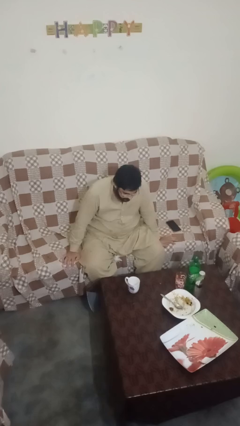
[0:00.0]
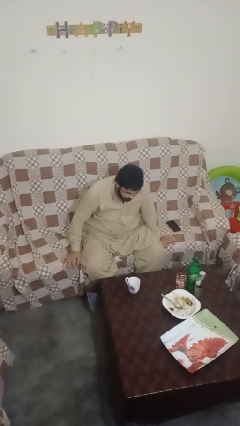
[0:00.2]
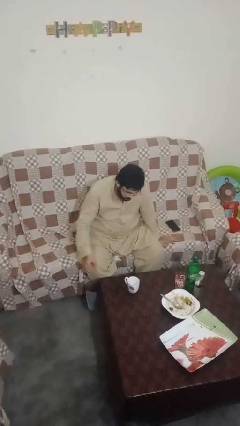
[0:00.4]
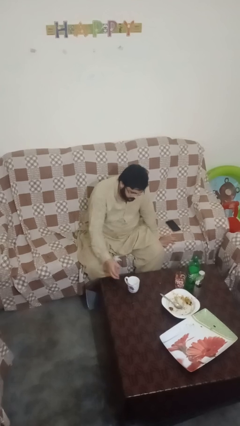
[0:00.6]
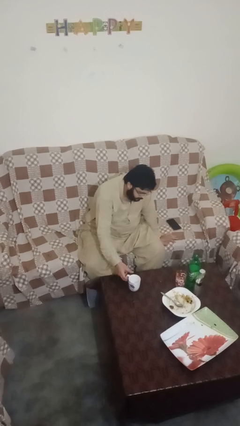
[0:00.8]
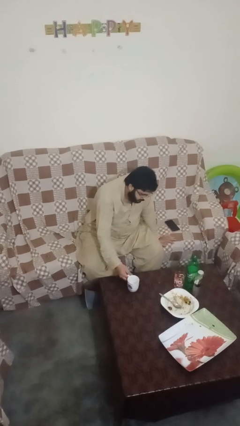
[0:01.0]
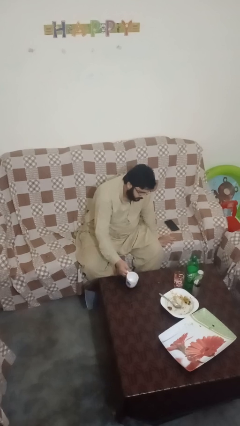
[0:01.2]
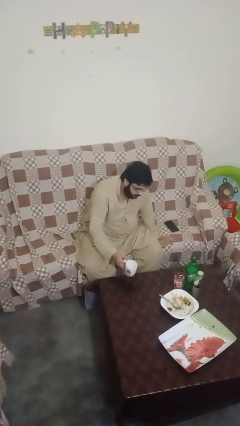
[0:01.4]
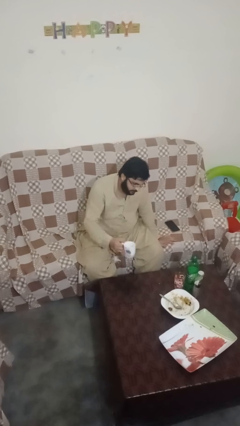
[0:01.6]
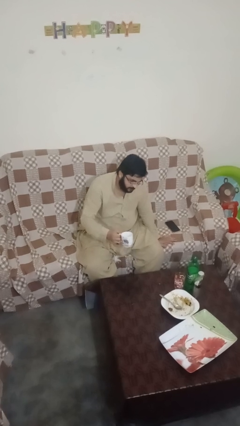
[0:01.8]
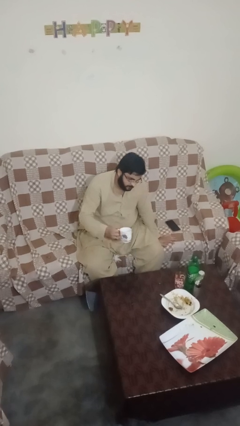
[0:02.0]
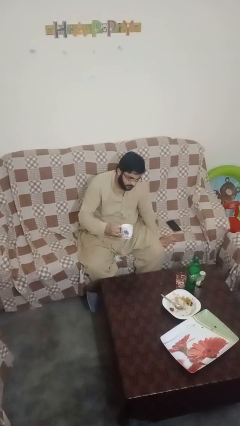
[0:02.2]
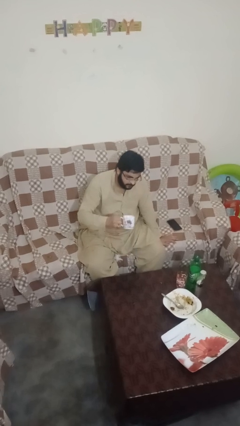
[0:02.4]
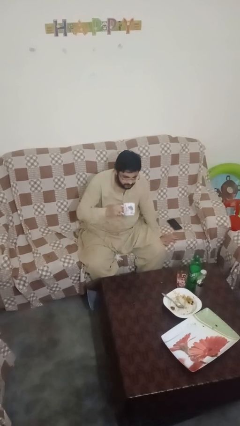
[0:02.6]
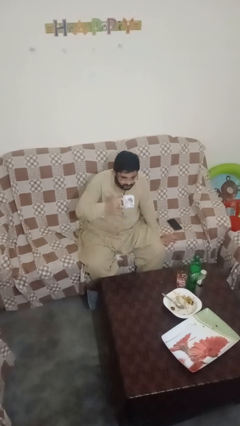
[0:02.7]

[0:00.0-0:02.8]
person picks up object from table

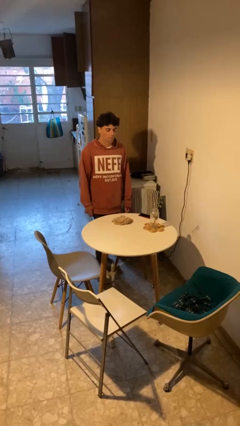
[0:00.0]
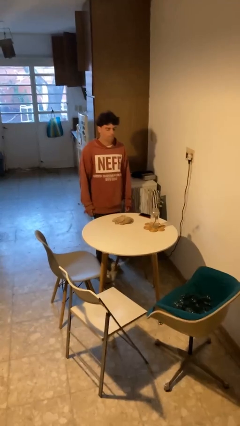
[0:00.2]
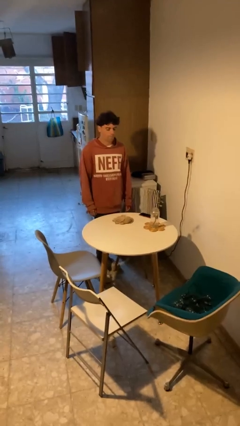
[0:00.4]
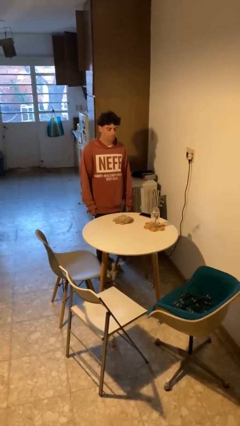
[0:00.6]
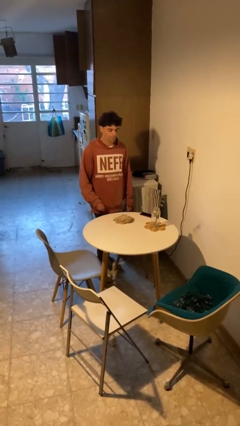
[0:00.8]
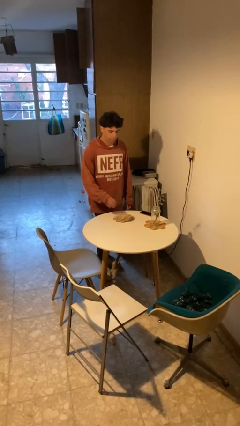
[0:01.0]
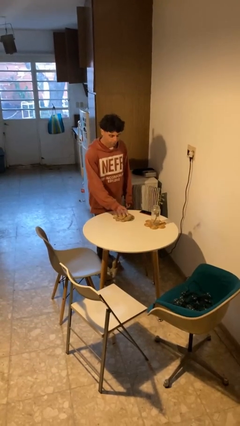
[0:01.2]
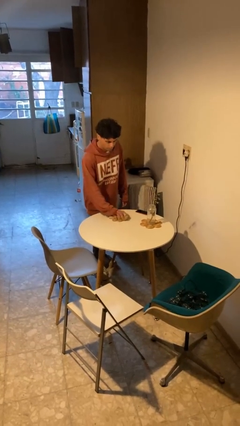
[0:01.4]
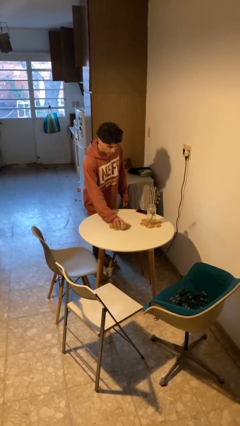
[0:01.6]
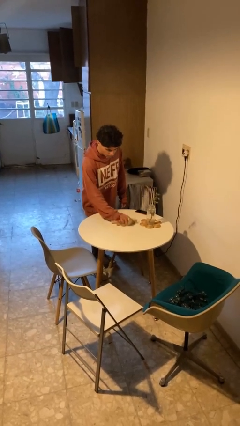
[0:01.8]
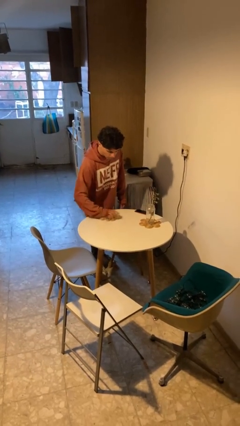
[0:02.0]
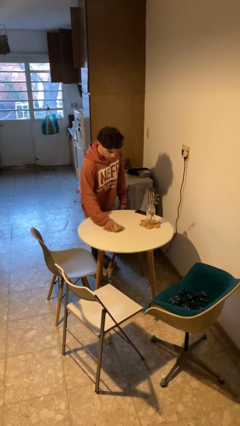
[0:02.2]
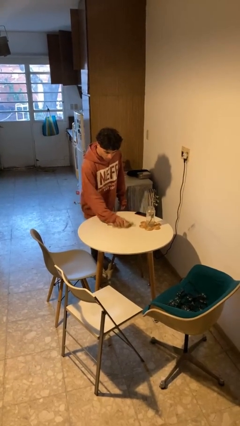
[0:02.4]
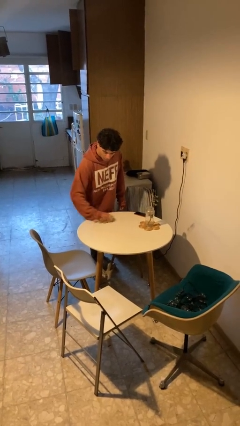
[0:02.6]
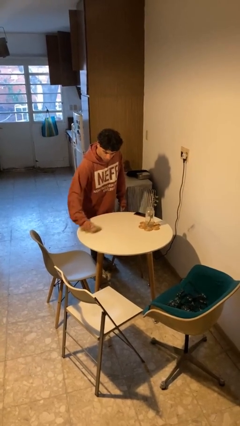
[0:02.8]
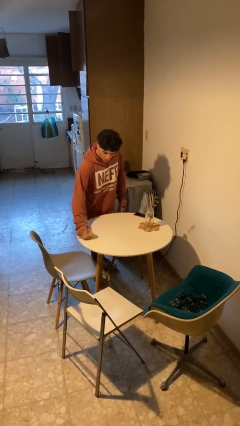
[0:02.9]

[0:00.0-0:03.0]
person cleans table with rag

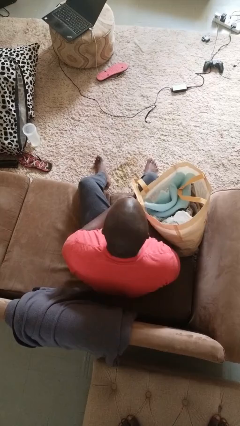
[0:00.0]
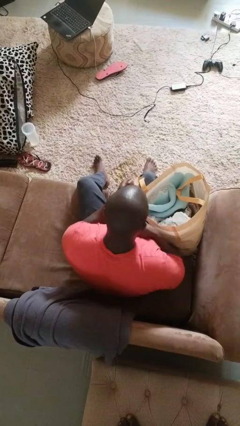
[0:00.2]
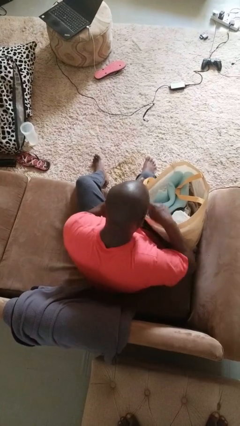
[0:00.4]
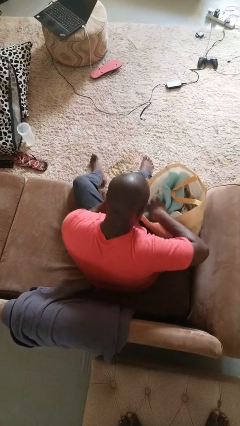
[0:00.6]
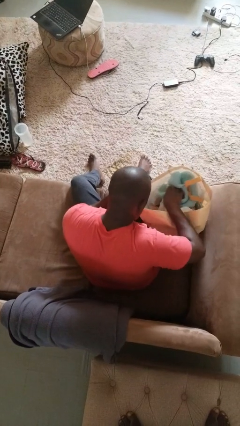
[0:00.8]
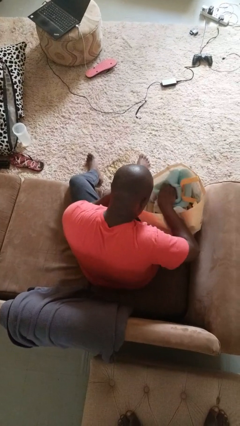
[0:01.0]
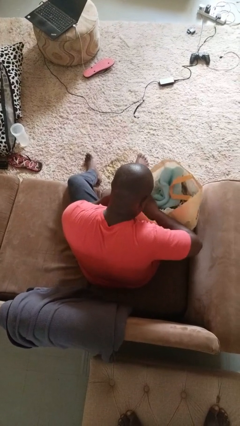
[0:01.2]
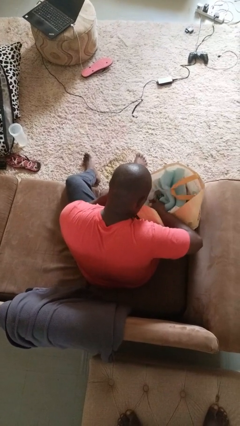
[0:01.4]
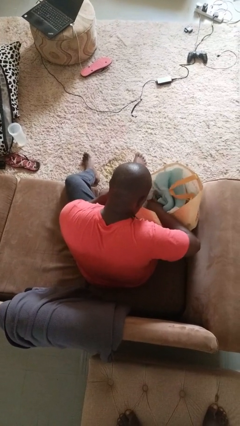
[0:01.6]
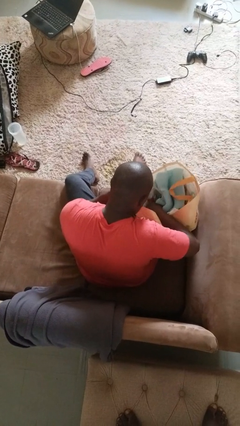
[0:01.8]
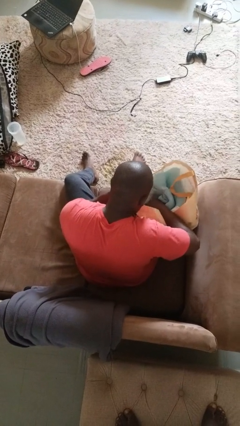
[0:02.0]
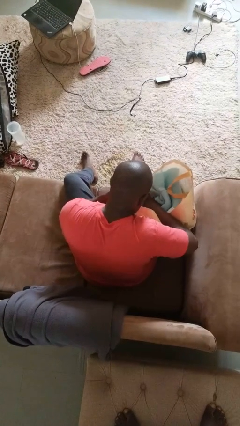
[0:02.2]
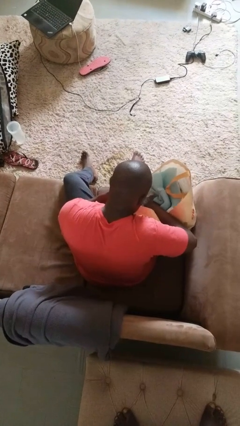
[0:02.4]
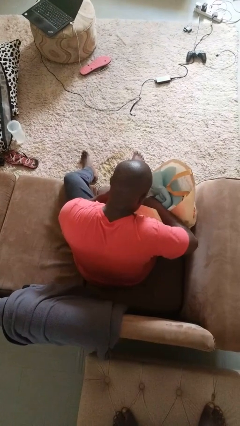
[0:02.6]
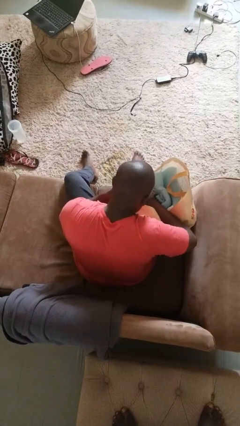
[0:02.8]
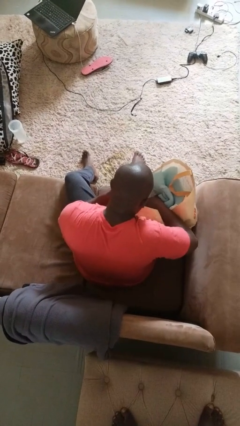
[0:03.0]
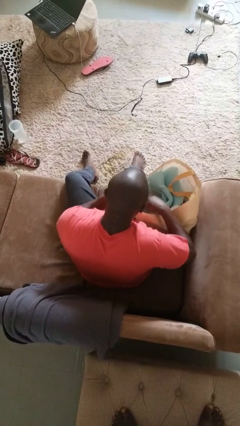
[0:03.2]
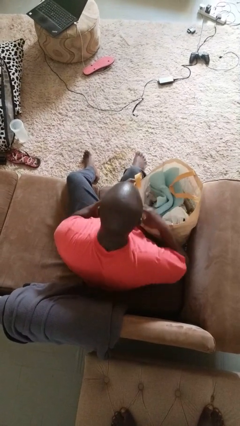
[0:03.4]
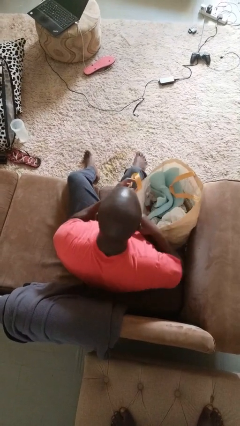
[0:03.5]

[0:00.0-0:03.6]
person searches in bag

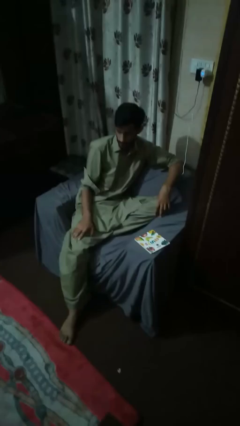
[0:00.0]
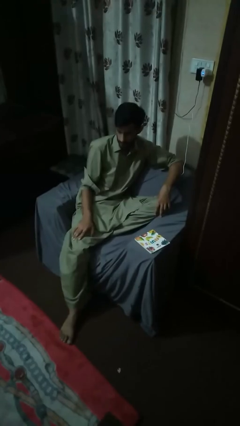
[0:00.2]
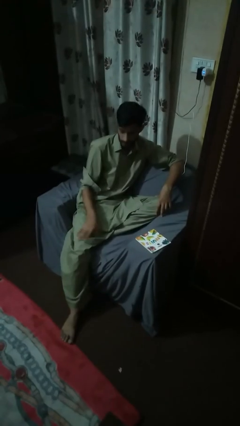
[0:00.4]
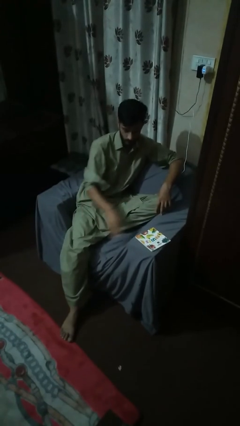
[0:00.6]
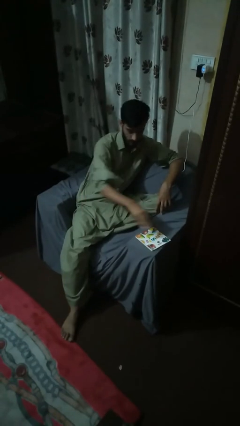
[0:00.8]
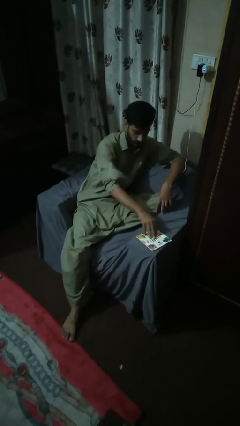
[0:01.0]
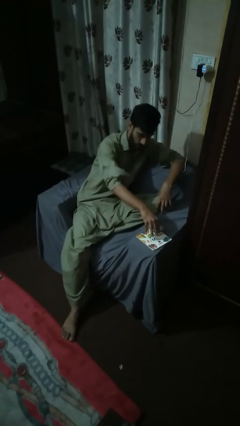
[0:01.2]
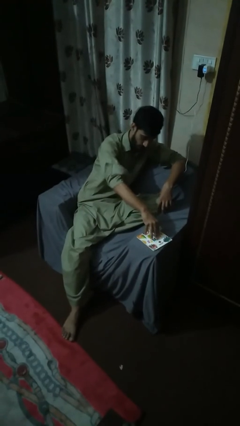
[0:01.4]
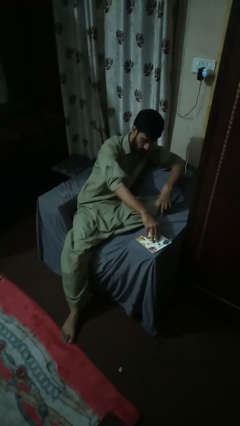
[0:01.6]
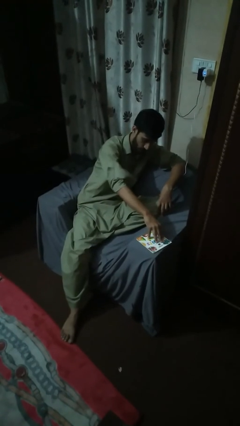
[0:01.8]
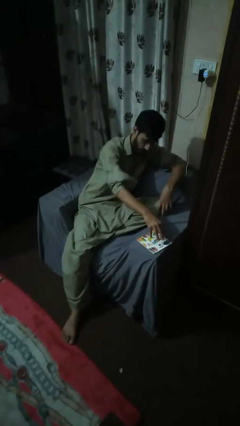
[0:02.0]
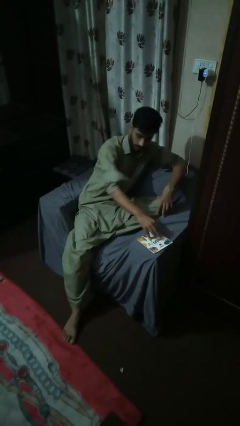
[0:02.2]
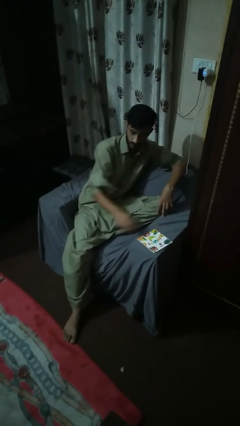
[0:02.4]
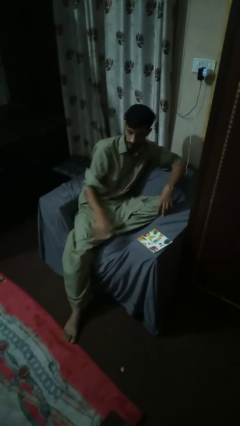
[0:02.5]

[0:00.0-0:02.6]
person taps object with finger

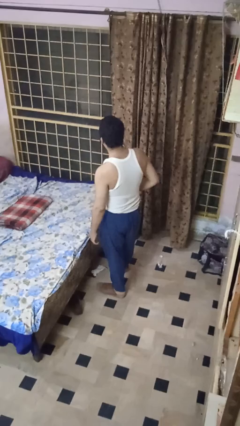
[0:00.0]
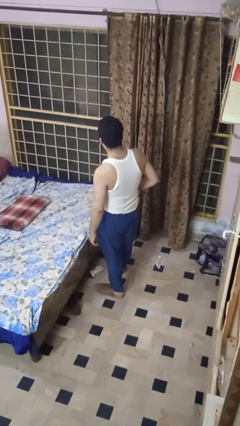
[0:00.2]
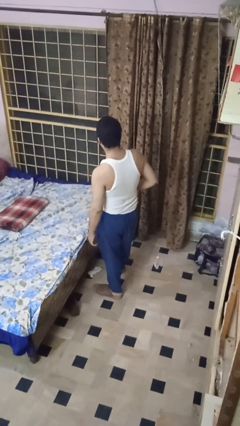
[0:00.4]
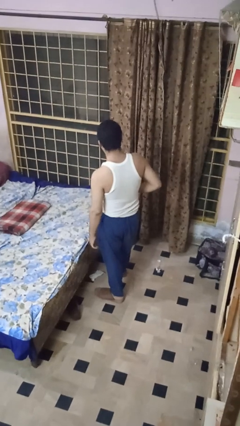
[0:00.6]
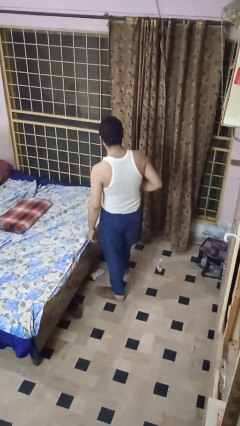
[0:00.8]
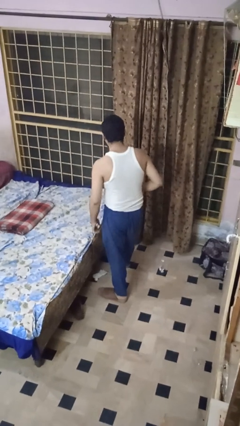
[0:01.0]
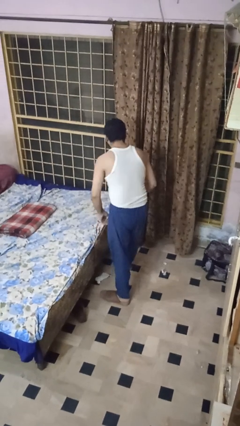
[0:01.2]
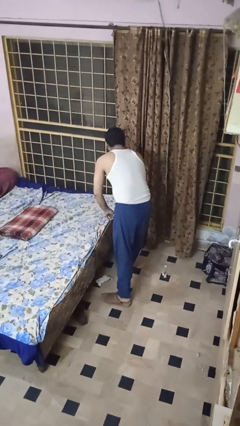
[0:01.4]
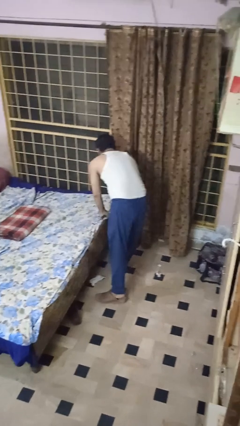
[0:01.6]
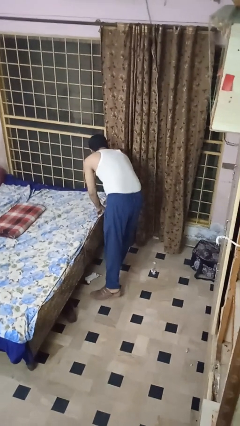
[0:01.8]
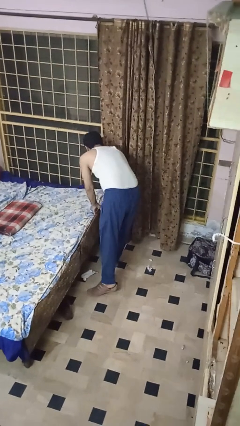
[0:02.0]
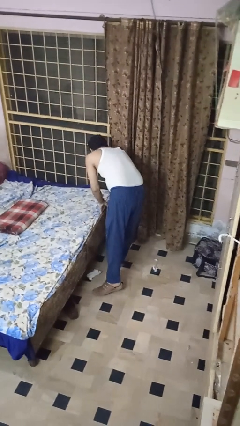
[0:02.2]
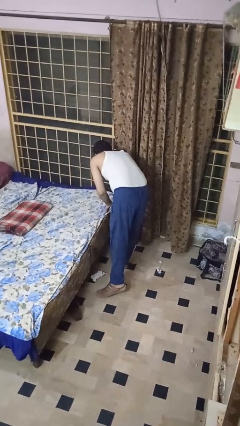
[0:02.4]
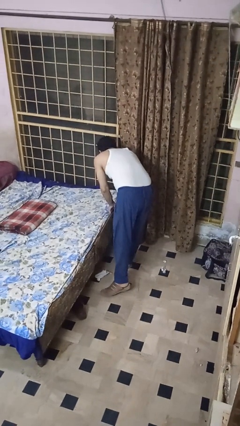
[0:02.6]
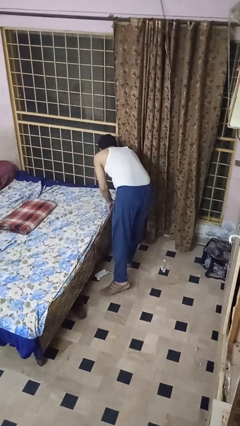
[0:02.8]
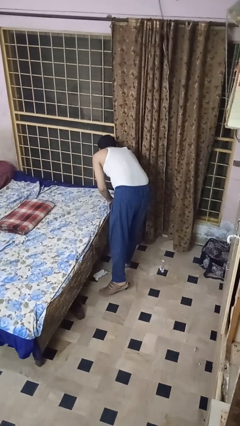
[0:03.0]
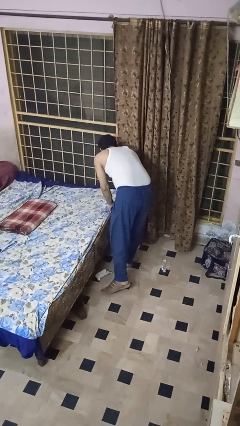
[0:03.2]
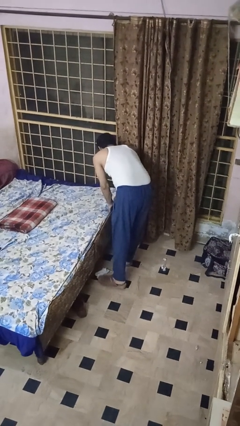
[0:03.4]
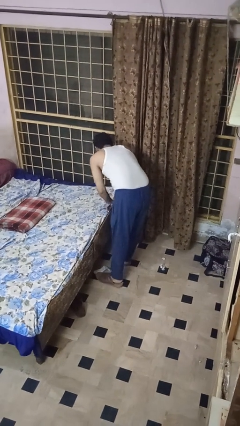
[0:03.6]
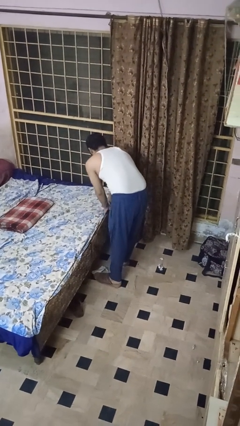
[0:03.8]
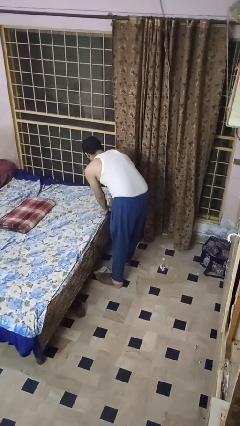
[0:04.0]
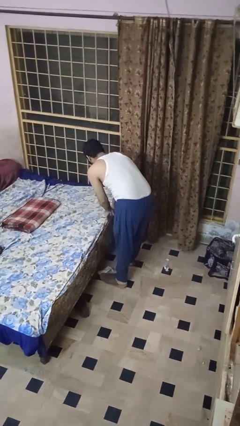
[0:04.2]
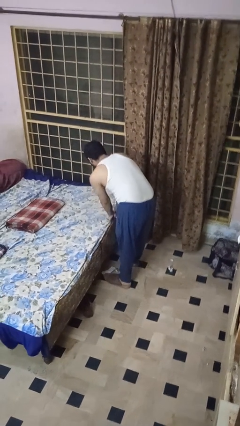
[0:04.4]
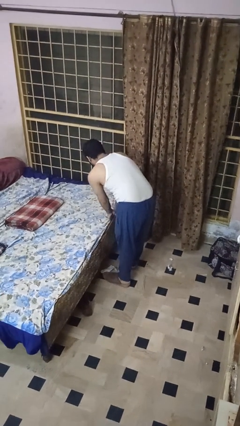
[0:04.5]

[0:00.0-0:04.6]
person makes bed

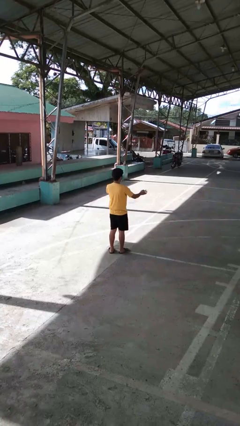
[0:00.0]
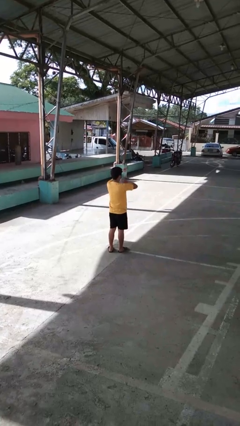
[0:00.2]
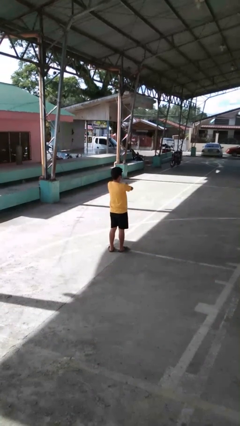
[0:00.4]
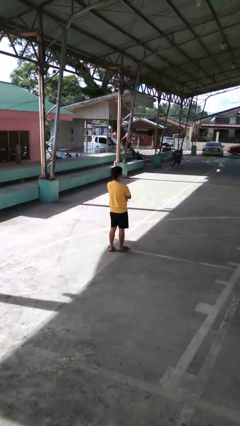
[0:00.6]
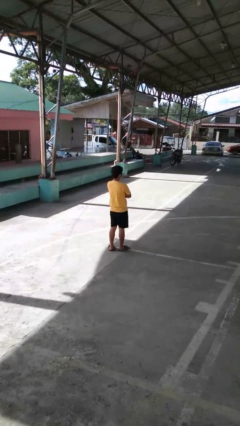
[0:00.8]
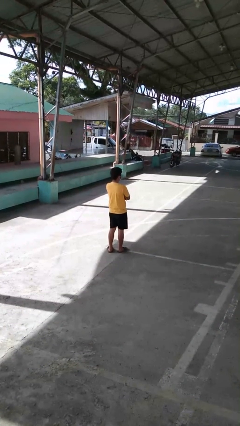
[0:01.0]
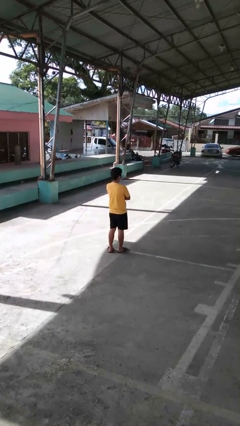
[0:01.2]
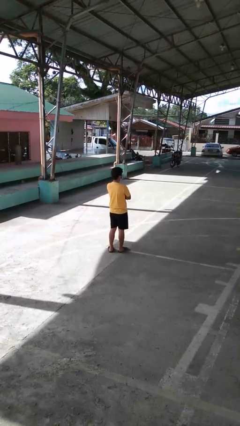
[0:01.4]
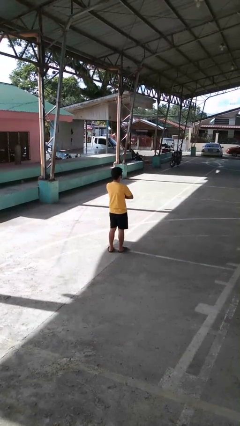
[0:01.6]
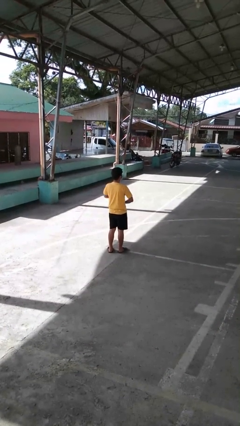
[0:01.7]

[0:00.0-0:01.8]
person crosses arms
